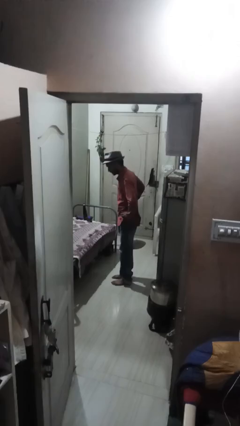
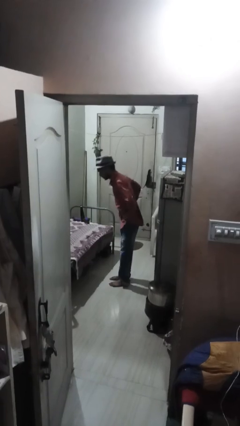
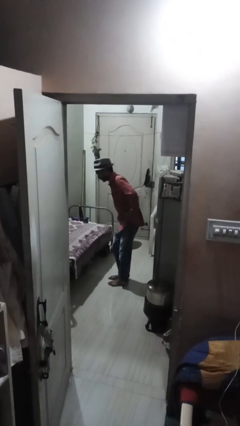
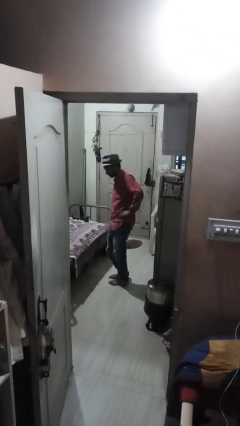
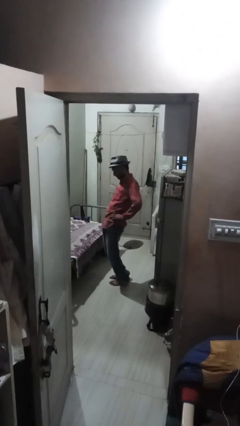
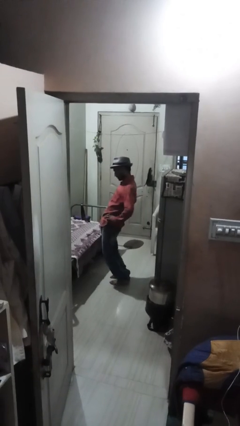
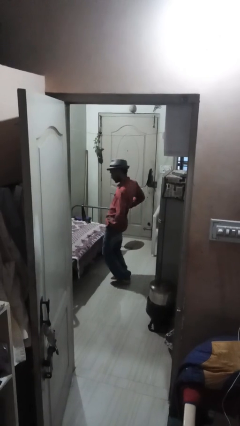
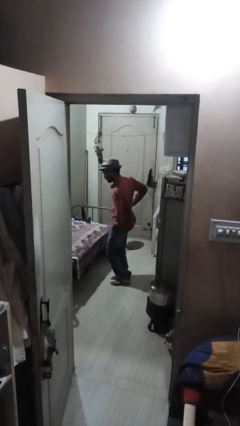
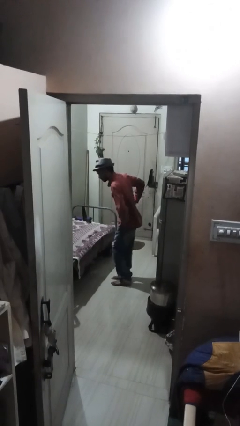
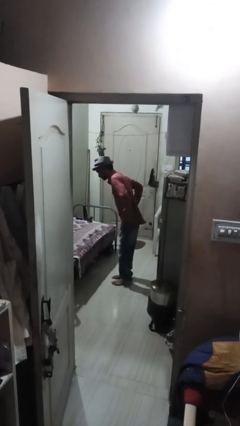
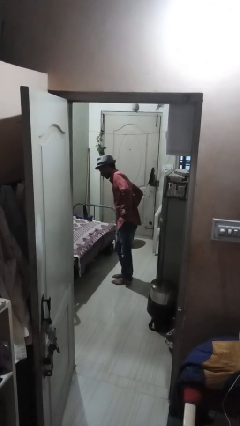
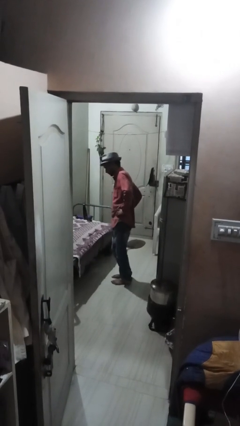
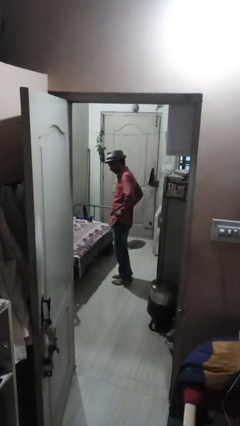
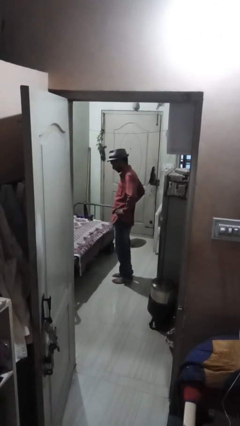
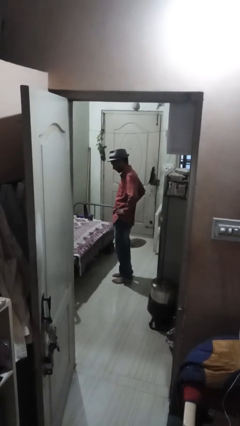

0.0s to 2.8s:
person wiggles hips

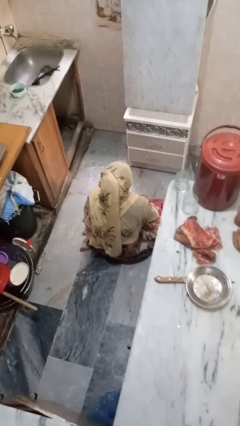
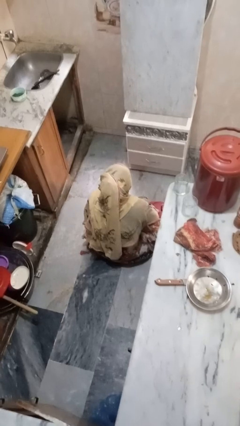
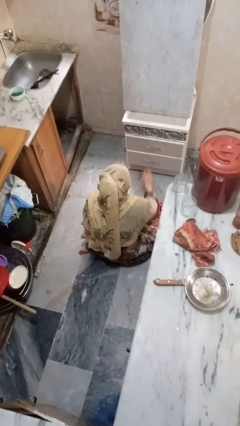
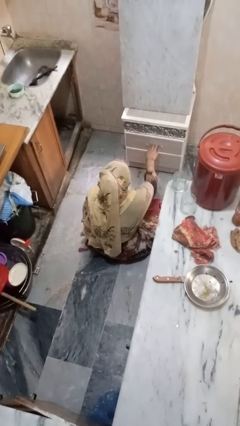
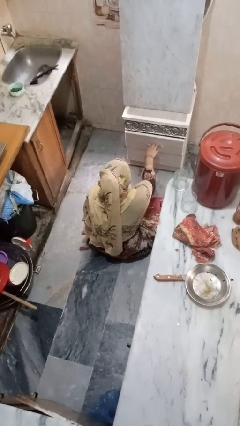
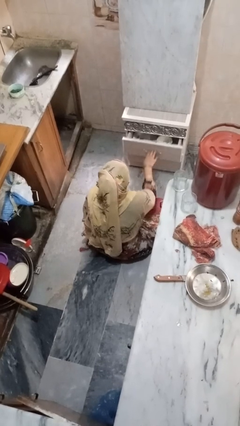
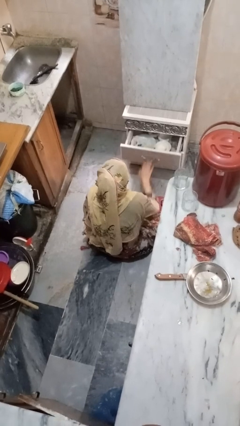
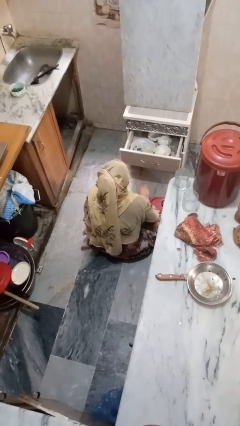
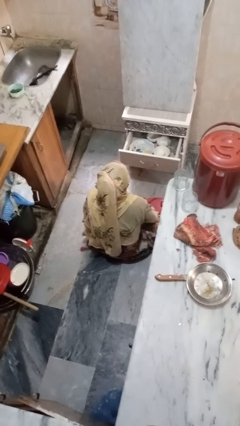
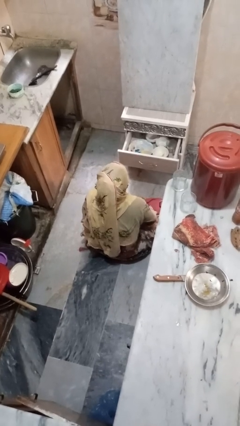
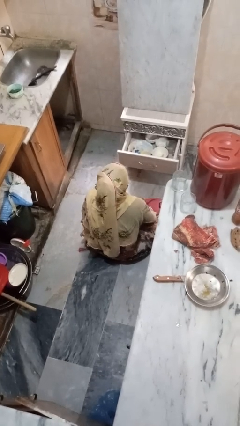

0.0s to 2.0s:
person opens kitchen drawer

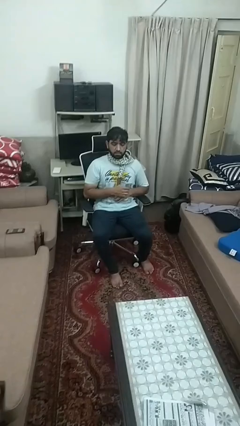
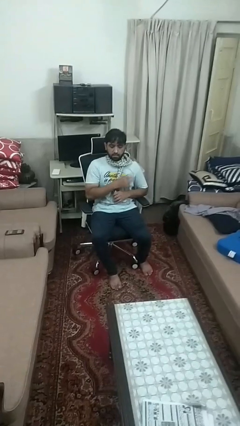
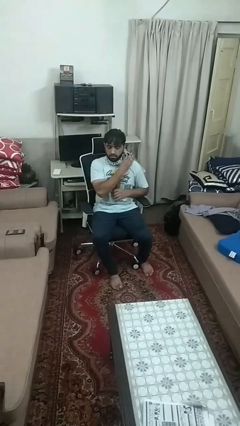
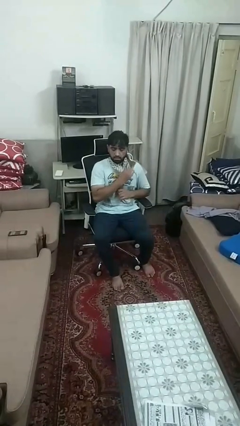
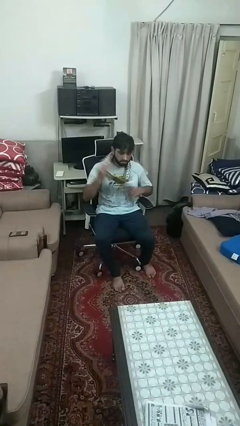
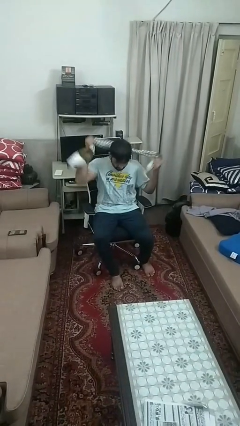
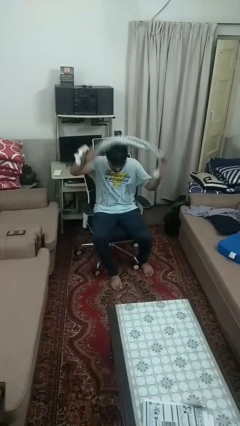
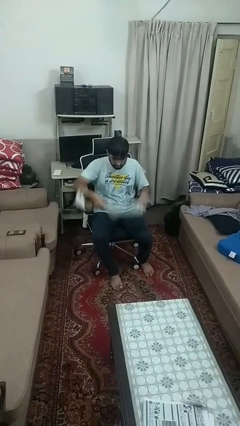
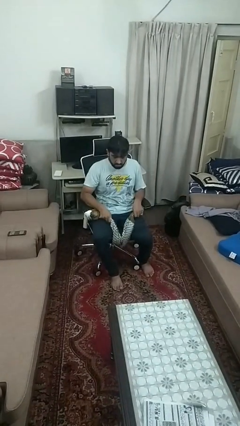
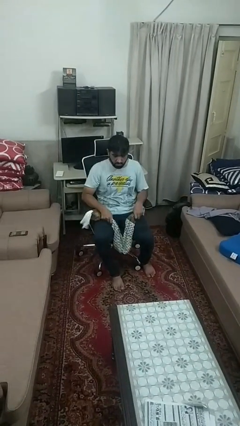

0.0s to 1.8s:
person takes off scarf

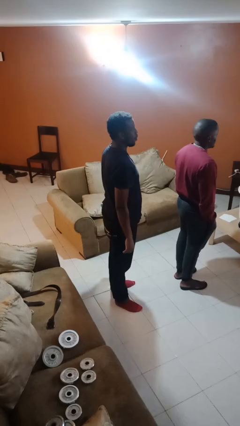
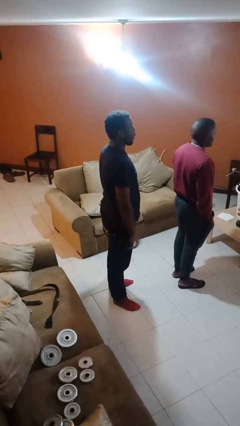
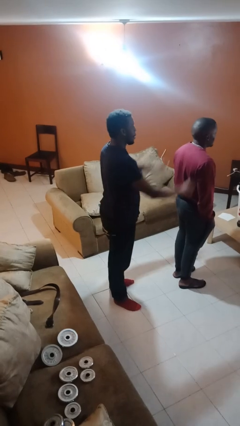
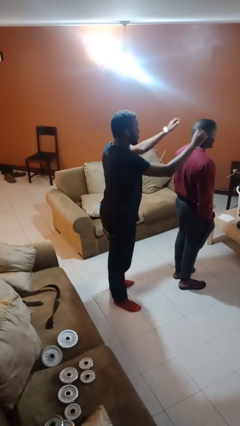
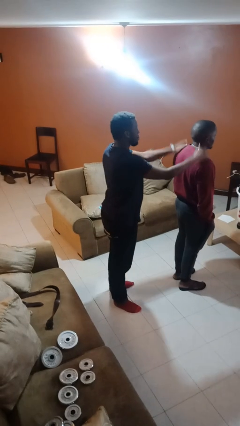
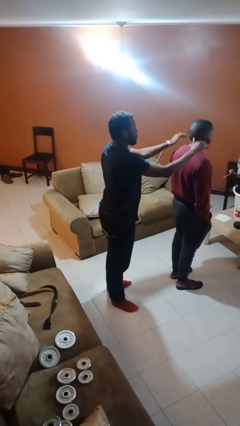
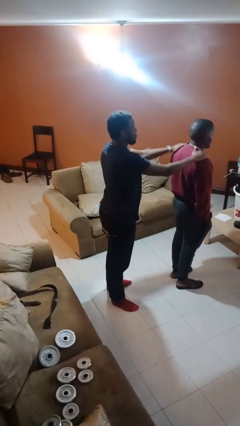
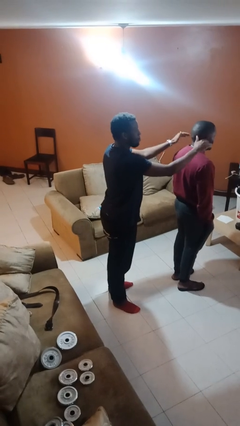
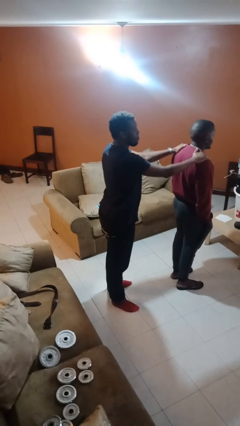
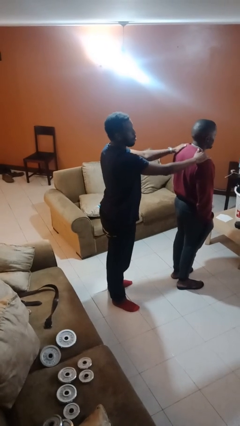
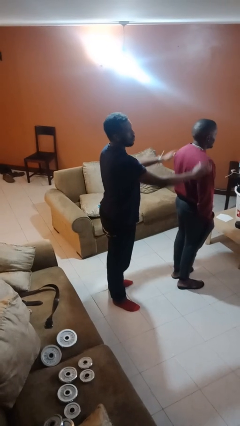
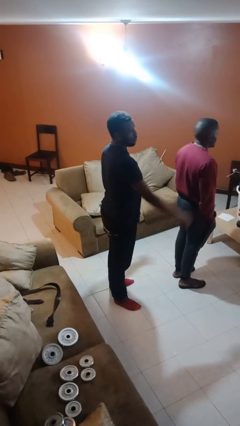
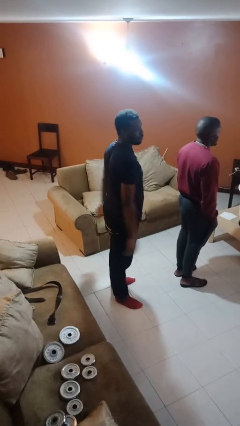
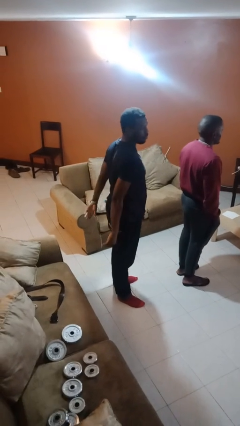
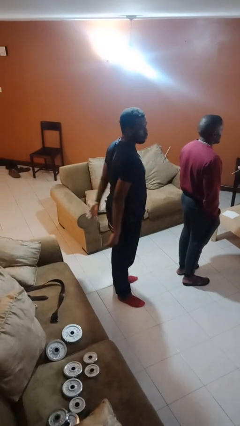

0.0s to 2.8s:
person pounds shoulders of person

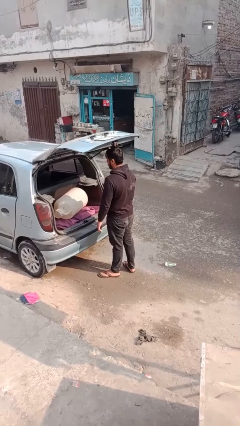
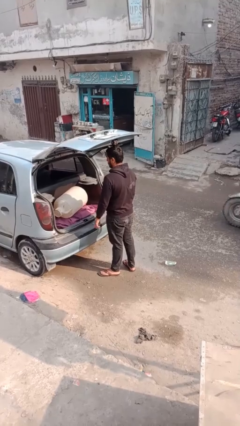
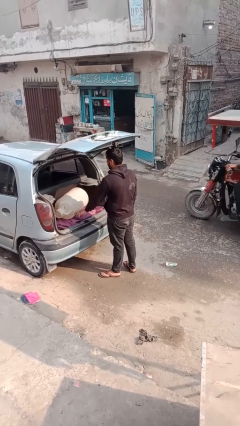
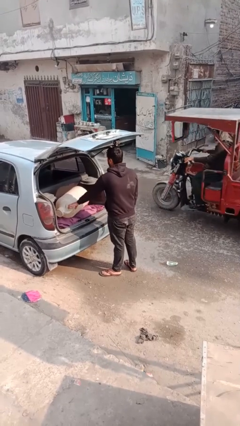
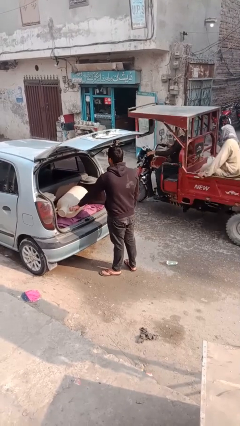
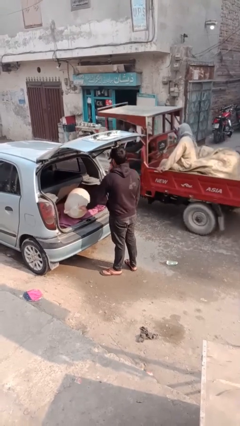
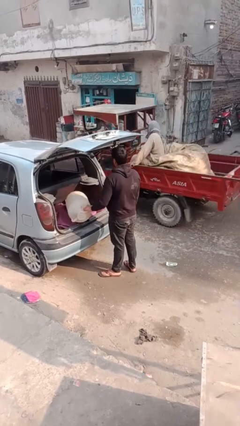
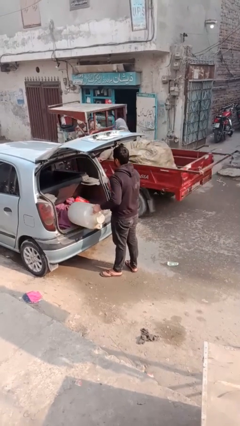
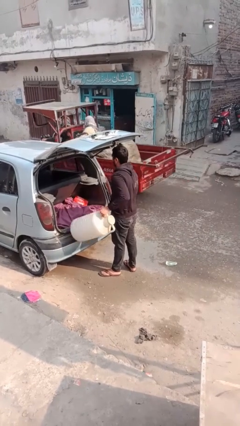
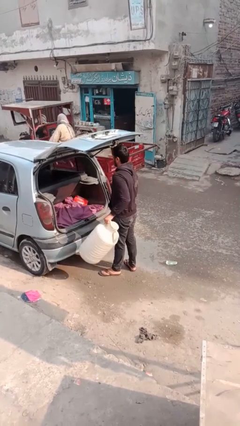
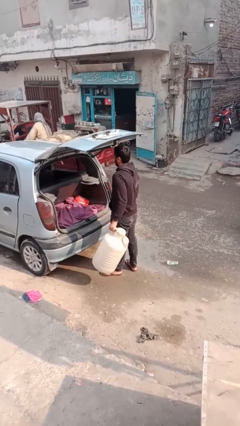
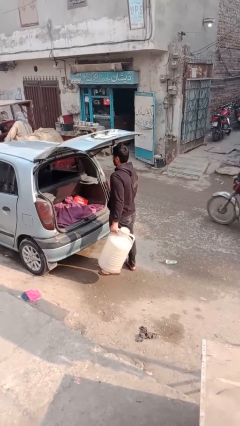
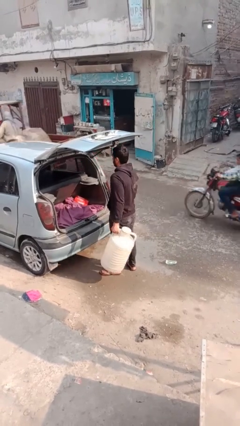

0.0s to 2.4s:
person unloads car

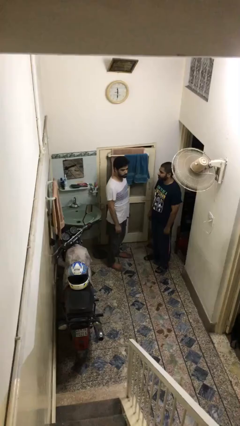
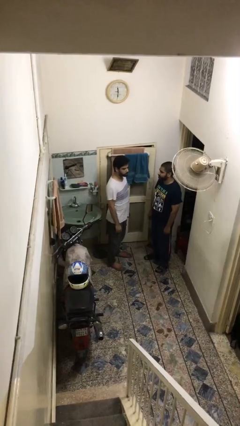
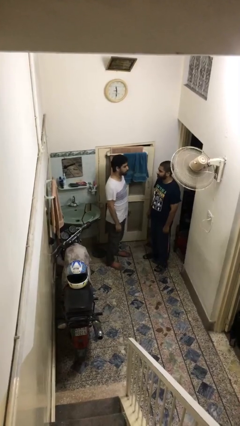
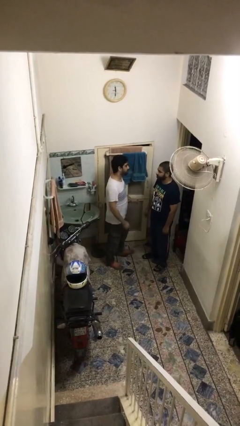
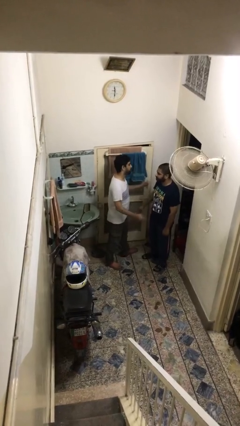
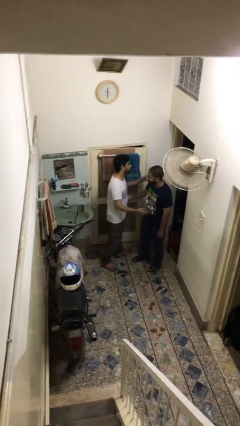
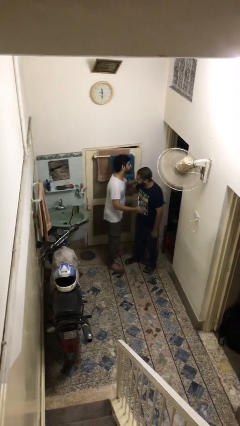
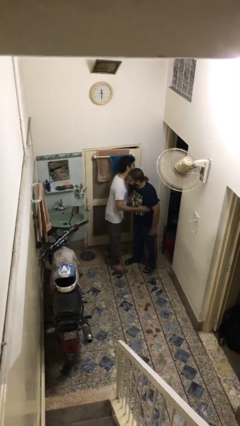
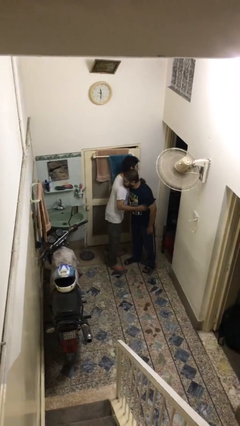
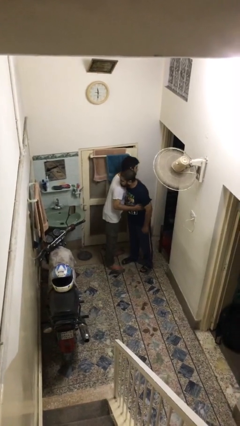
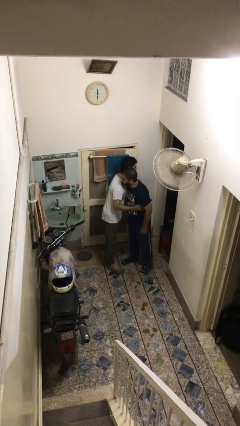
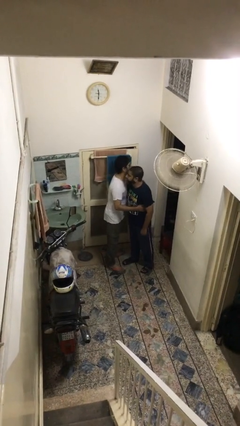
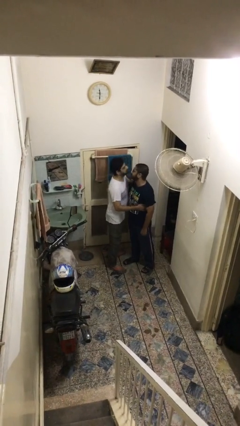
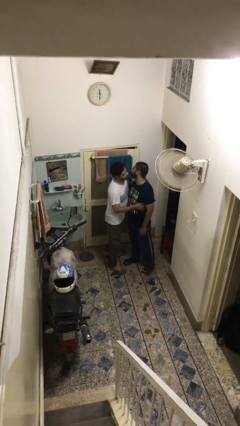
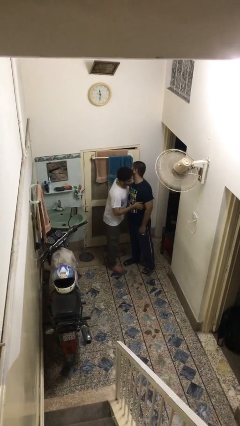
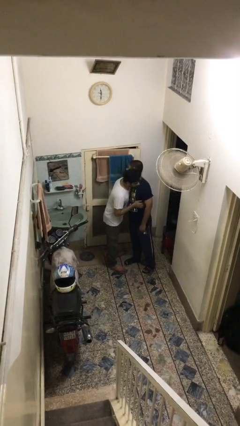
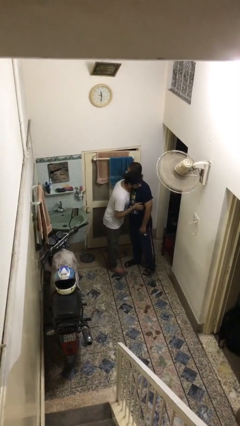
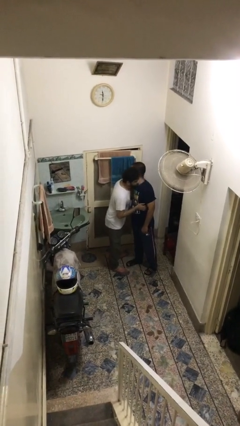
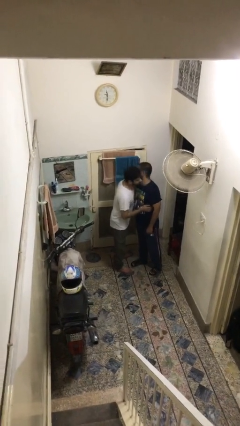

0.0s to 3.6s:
person embraces person

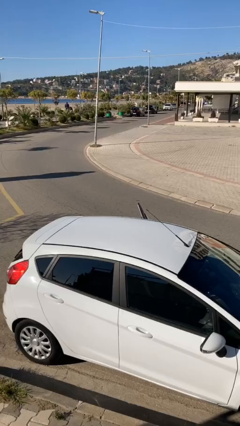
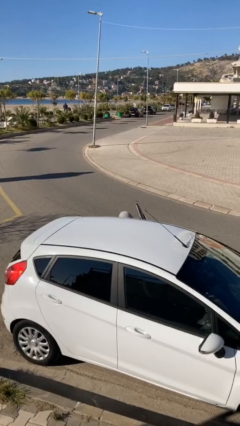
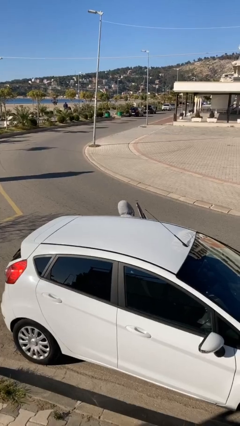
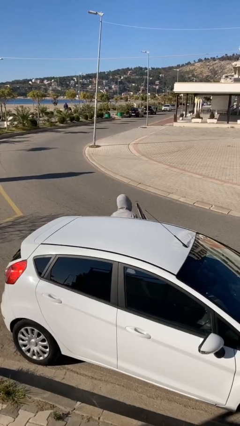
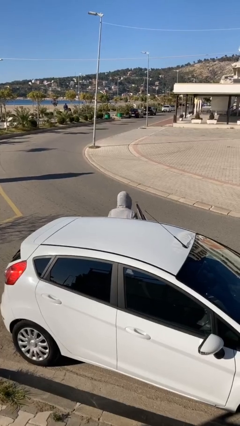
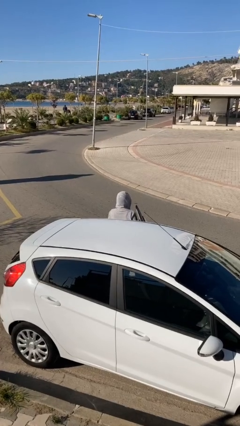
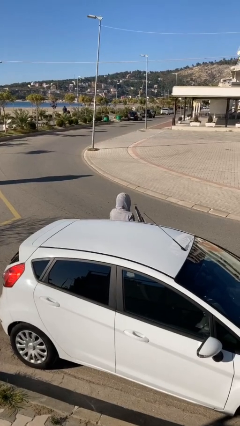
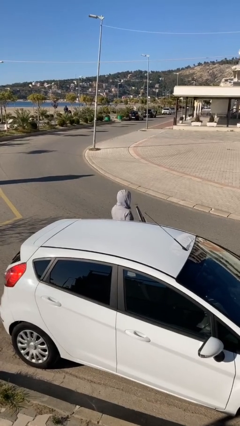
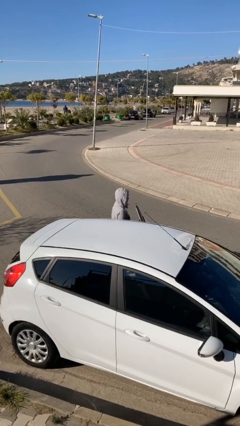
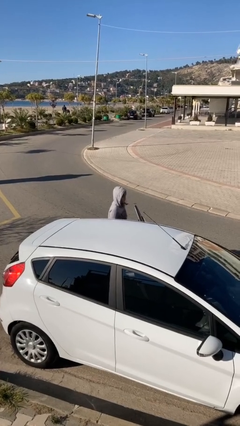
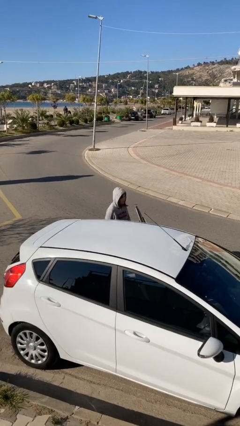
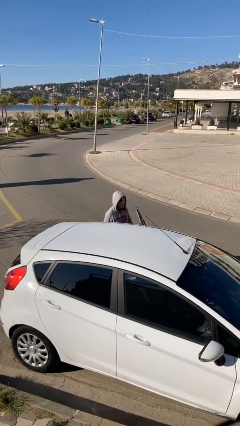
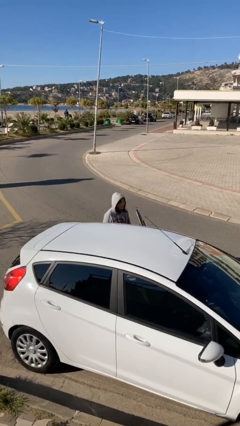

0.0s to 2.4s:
person exits car
